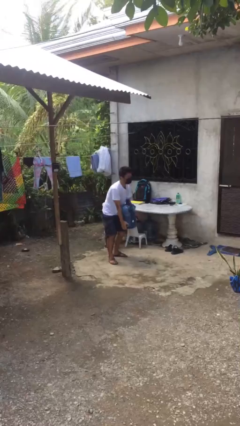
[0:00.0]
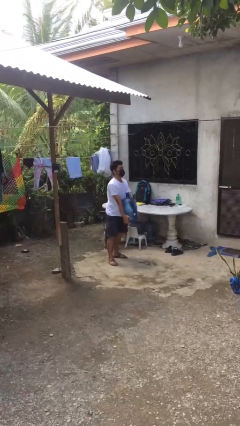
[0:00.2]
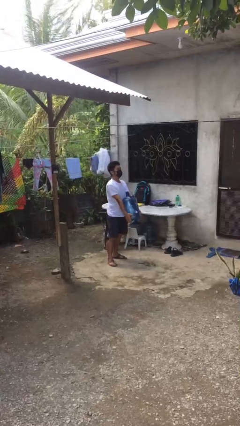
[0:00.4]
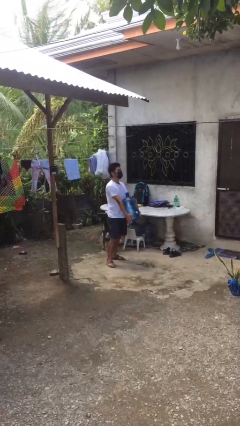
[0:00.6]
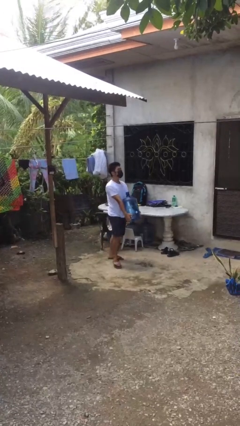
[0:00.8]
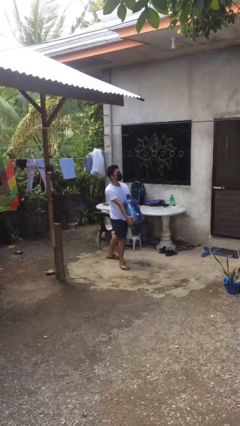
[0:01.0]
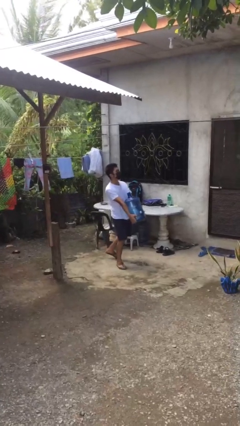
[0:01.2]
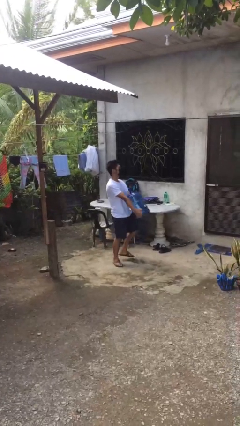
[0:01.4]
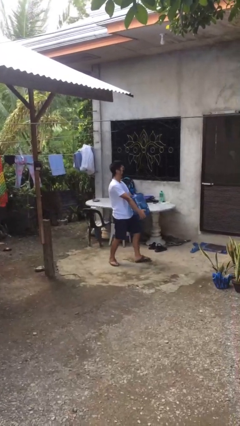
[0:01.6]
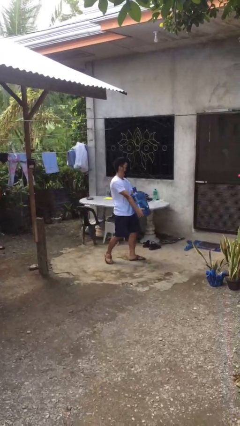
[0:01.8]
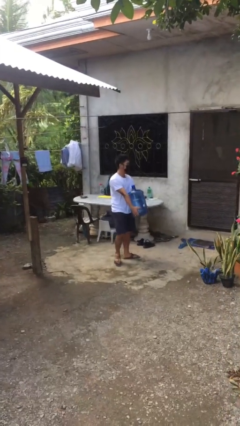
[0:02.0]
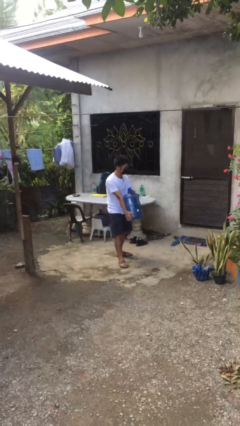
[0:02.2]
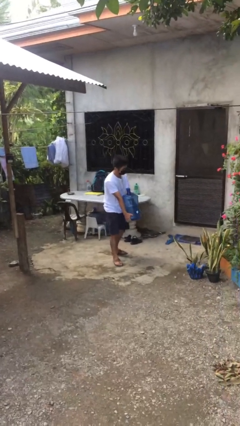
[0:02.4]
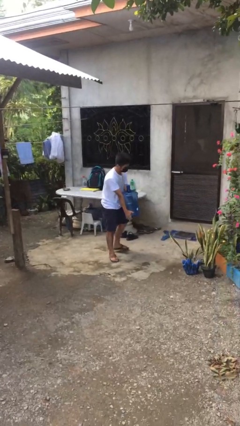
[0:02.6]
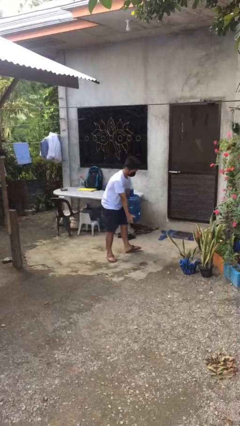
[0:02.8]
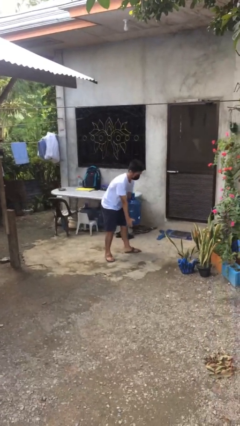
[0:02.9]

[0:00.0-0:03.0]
person carries heavy object

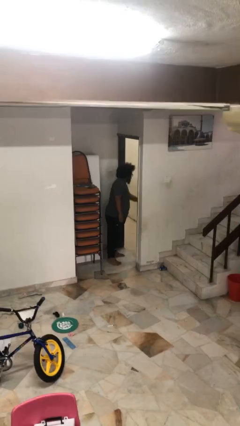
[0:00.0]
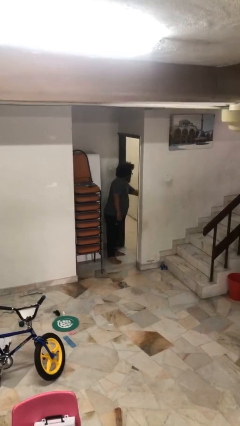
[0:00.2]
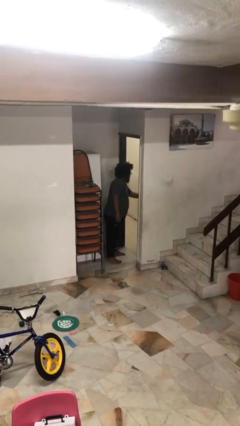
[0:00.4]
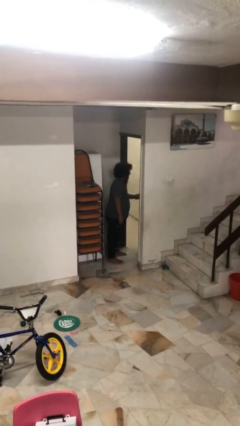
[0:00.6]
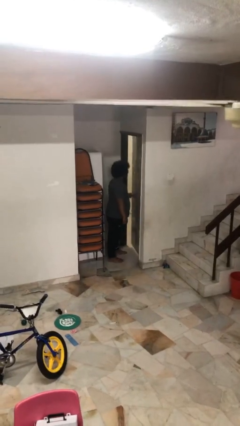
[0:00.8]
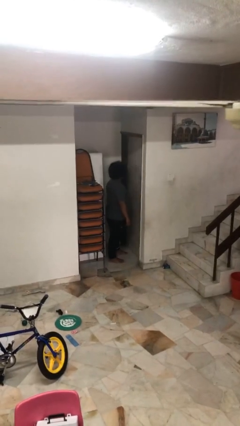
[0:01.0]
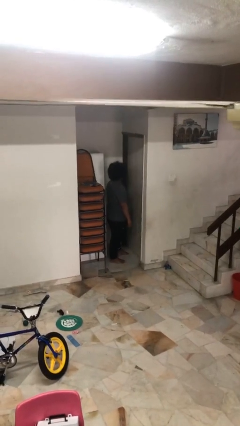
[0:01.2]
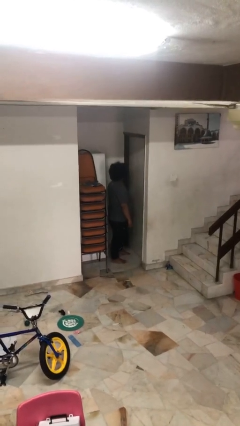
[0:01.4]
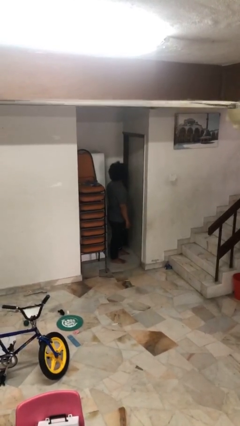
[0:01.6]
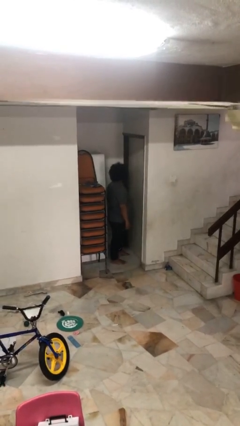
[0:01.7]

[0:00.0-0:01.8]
person closes facility door

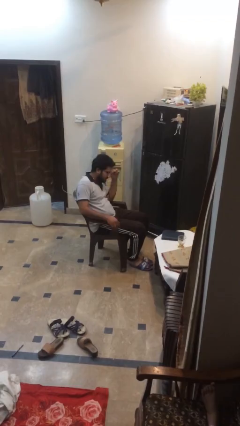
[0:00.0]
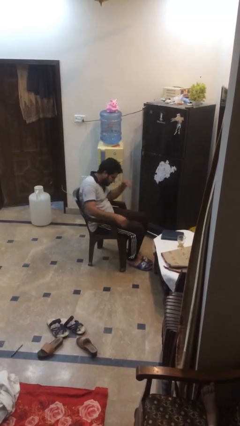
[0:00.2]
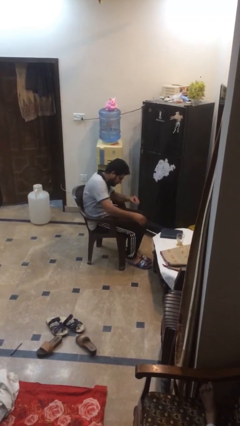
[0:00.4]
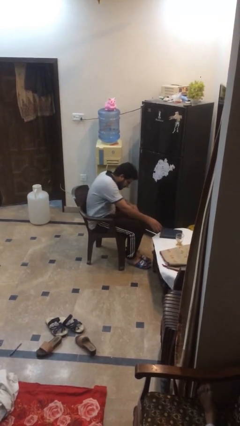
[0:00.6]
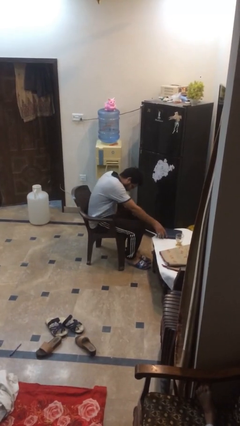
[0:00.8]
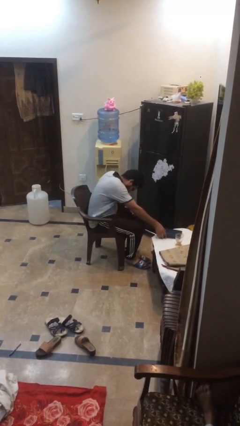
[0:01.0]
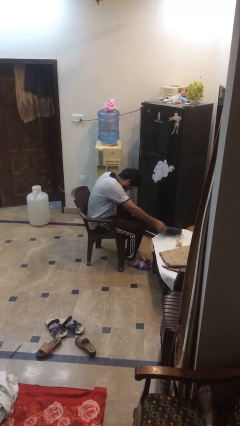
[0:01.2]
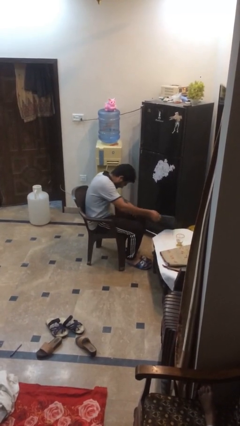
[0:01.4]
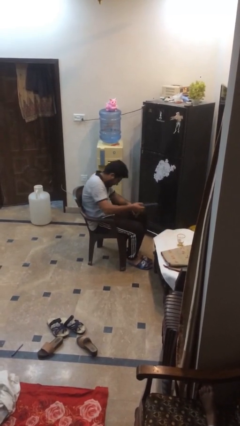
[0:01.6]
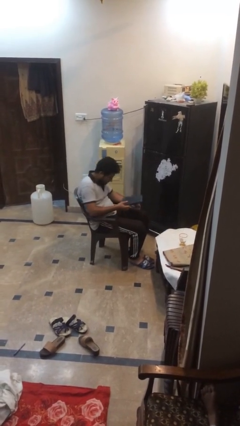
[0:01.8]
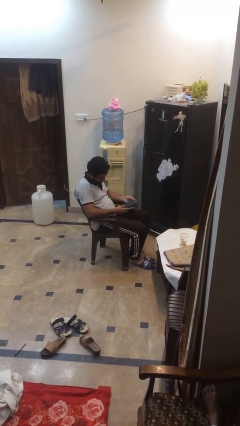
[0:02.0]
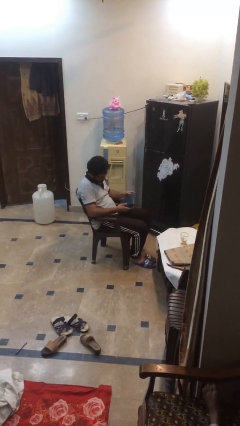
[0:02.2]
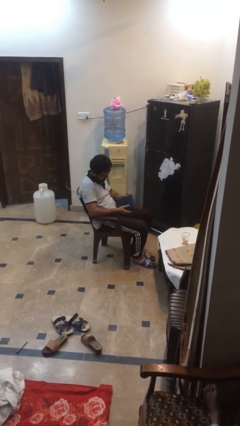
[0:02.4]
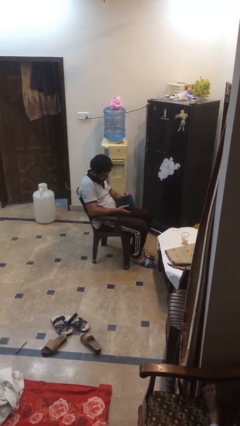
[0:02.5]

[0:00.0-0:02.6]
person picks up object from table

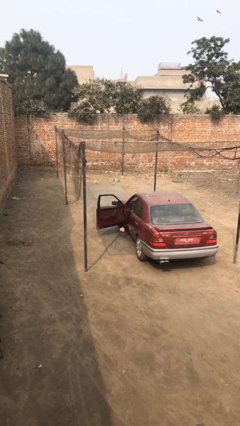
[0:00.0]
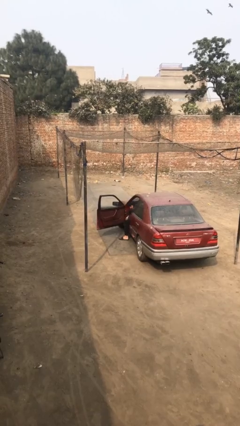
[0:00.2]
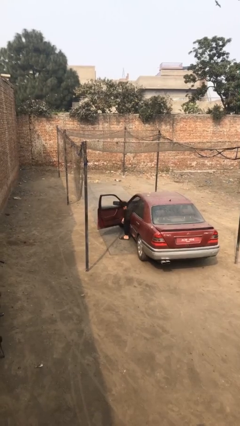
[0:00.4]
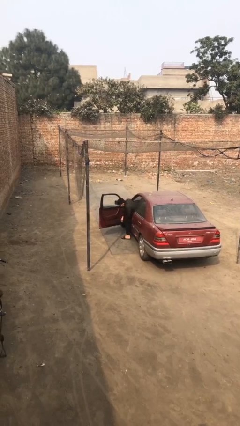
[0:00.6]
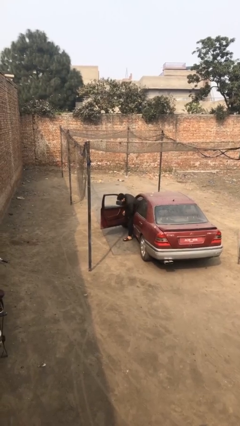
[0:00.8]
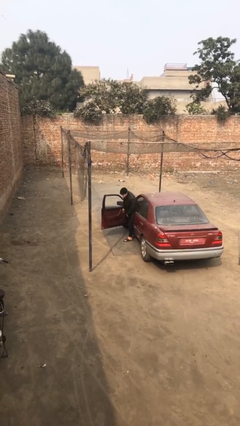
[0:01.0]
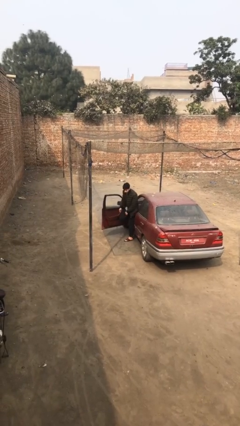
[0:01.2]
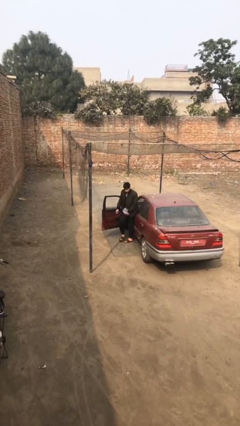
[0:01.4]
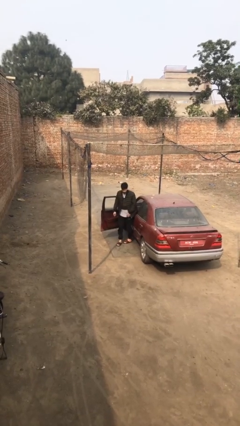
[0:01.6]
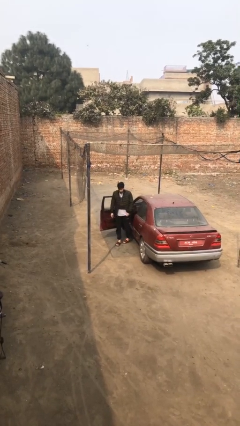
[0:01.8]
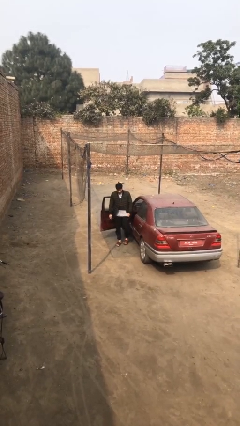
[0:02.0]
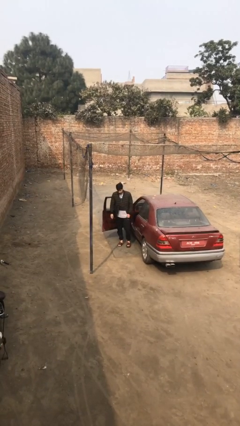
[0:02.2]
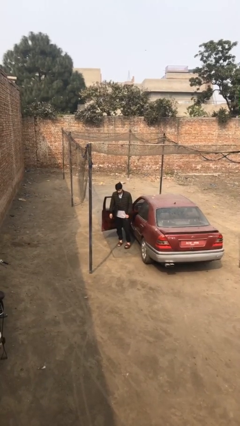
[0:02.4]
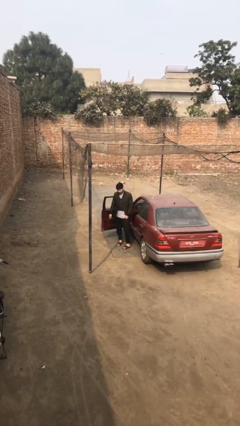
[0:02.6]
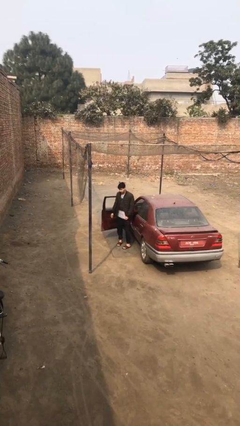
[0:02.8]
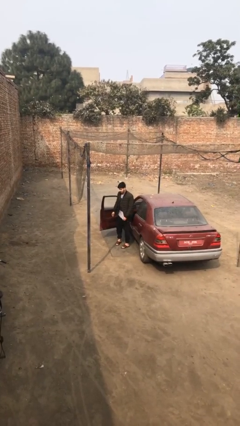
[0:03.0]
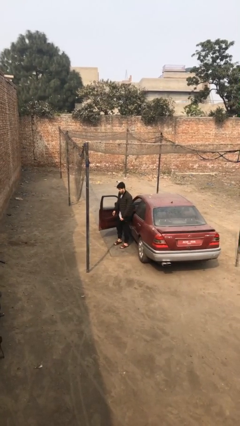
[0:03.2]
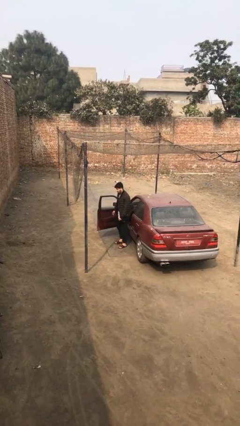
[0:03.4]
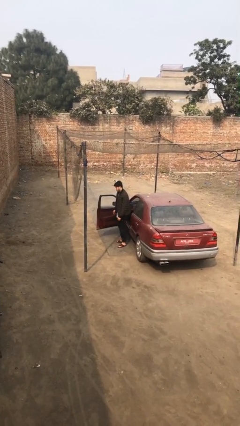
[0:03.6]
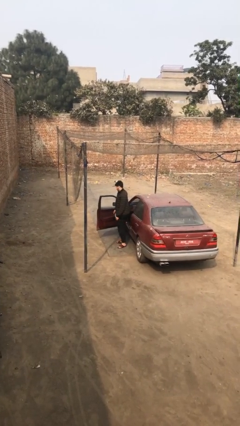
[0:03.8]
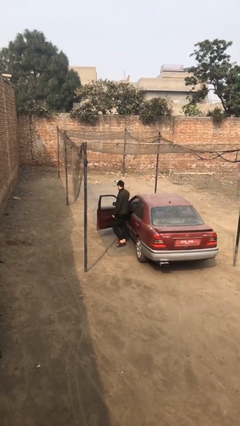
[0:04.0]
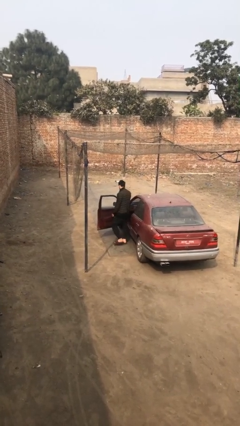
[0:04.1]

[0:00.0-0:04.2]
person exits car

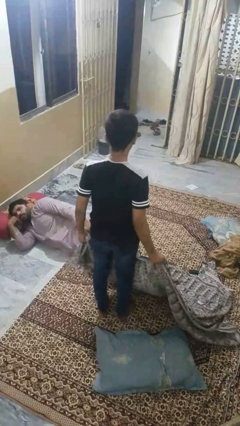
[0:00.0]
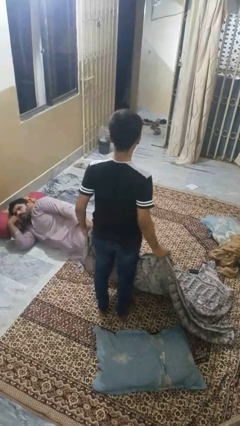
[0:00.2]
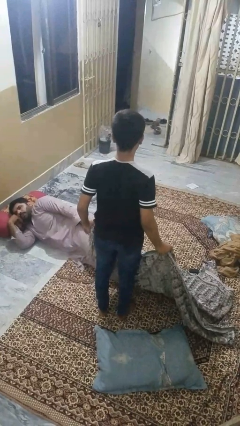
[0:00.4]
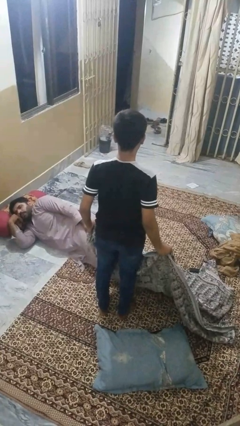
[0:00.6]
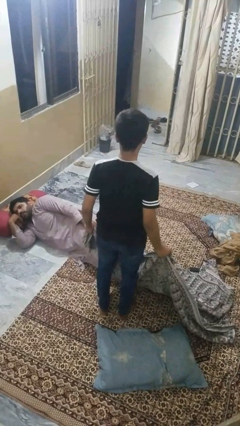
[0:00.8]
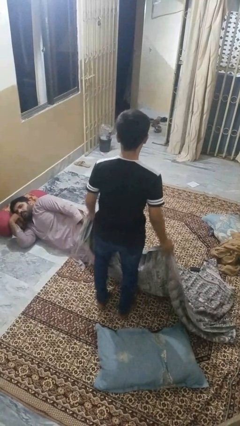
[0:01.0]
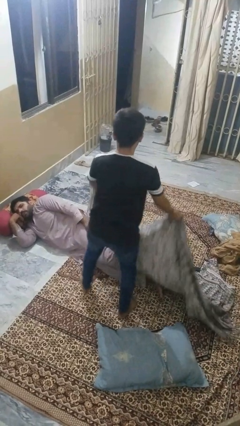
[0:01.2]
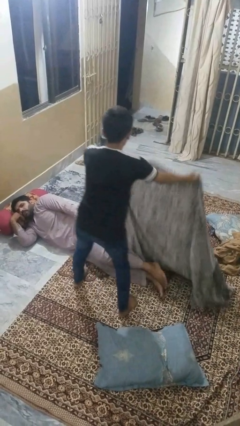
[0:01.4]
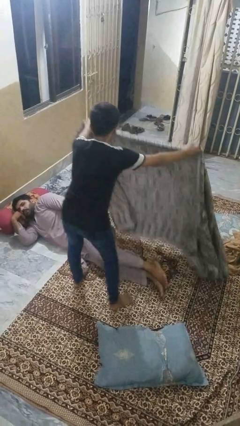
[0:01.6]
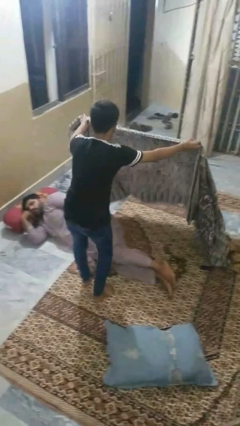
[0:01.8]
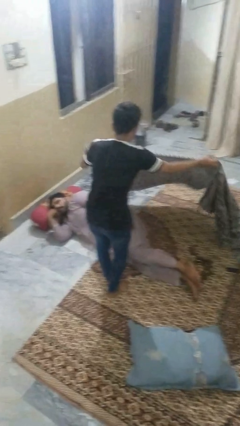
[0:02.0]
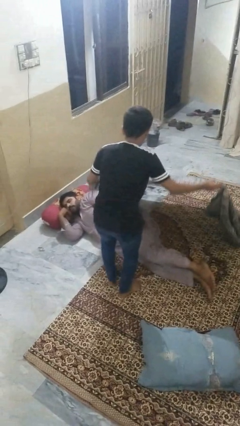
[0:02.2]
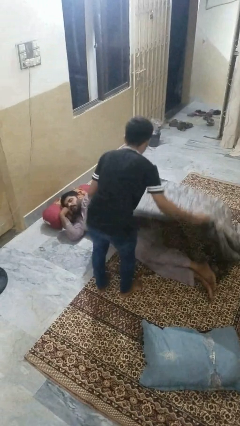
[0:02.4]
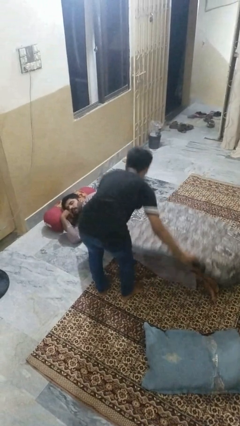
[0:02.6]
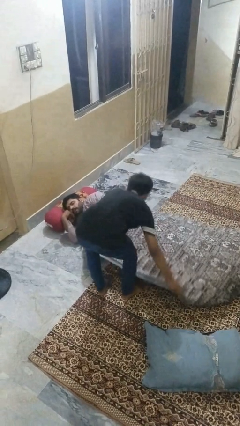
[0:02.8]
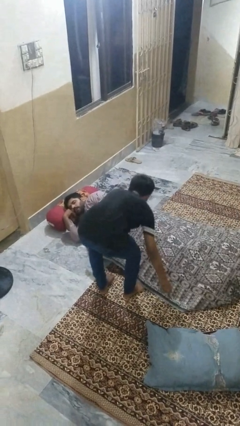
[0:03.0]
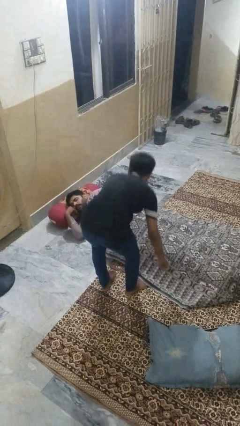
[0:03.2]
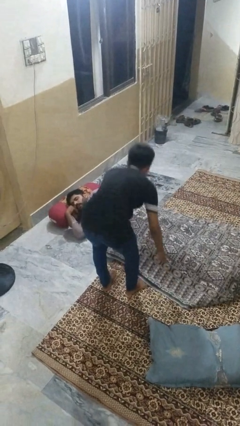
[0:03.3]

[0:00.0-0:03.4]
person covers friend with blanket

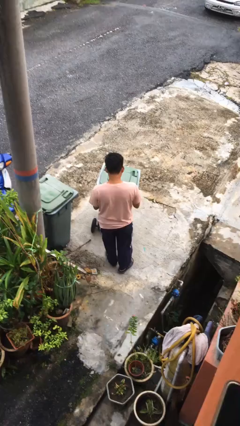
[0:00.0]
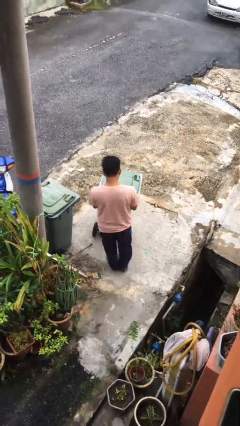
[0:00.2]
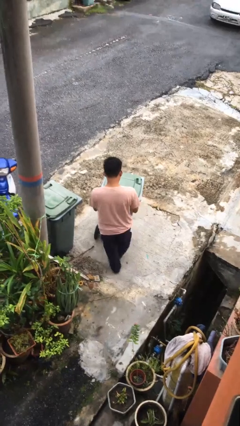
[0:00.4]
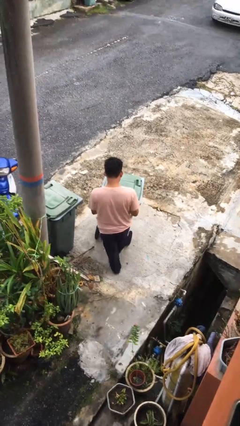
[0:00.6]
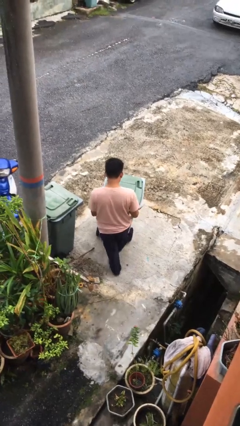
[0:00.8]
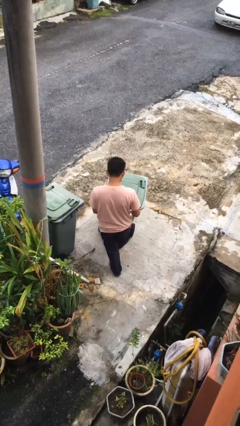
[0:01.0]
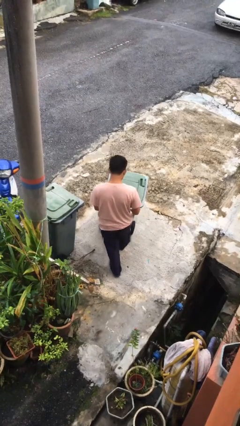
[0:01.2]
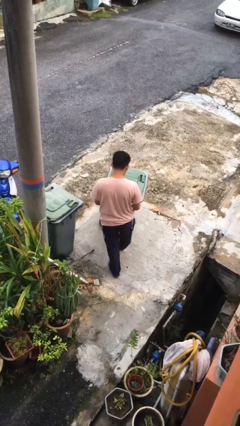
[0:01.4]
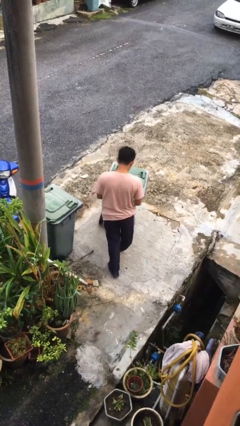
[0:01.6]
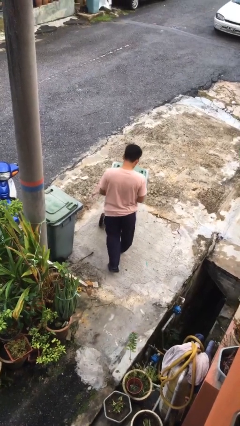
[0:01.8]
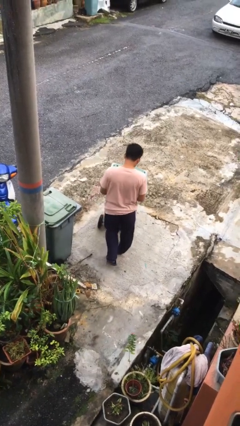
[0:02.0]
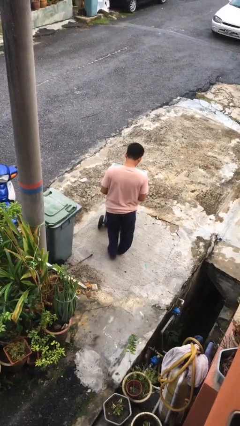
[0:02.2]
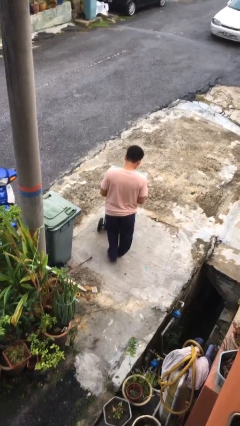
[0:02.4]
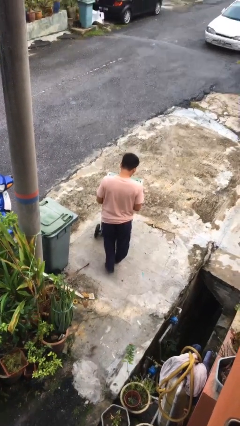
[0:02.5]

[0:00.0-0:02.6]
person pushes wheeled trashcan
